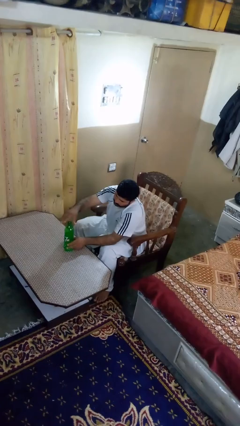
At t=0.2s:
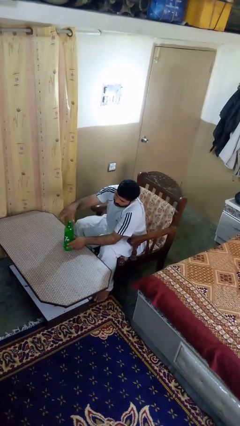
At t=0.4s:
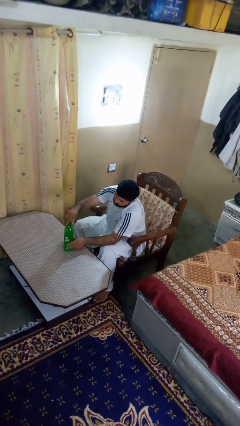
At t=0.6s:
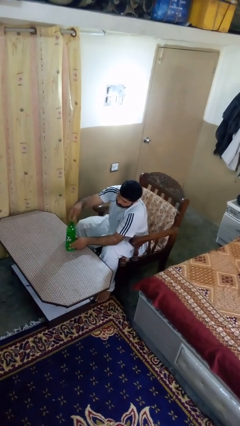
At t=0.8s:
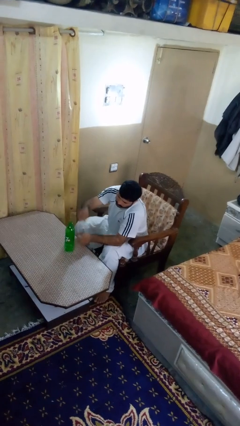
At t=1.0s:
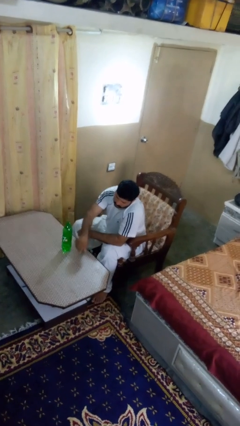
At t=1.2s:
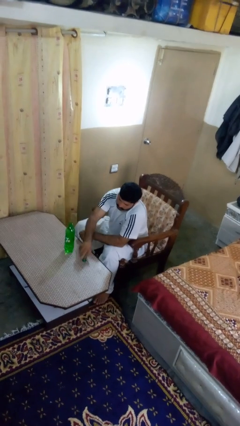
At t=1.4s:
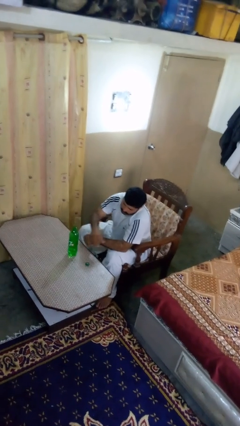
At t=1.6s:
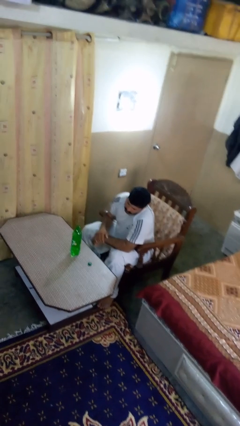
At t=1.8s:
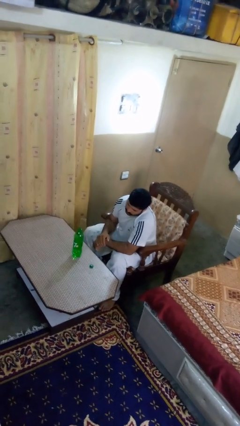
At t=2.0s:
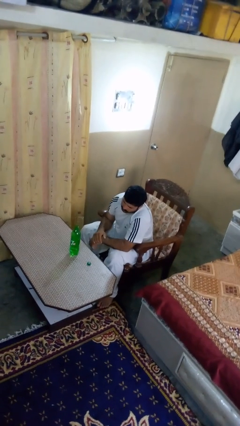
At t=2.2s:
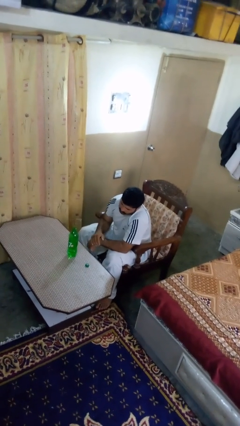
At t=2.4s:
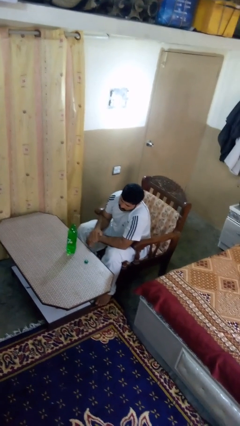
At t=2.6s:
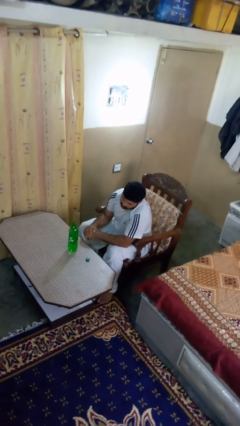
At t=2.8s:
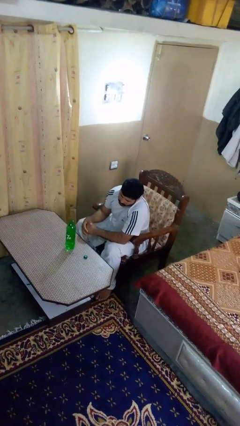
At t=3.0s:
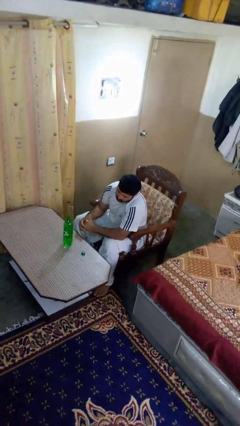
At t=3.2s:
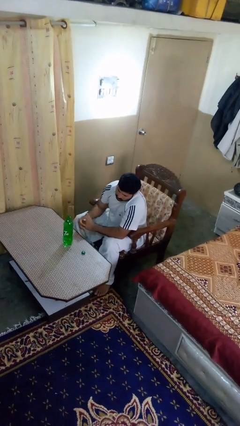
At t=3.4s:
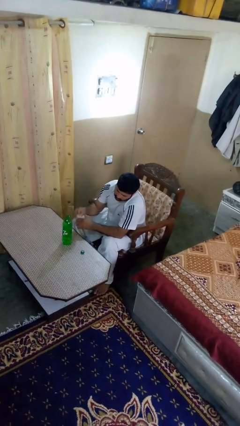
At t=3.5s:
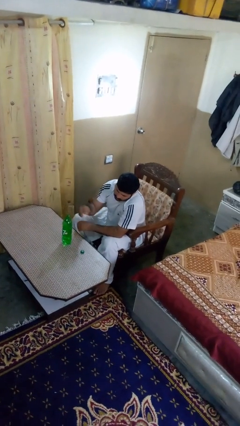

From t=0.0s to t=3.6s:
person unscrews lid from bottle

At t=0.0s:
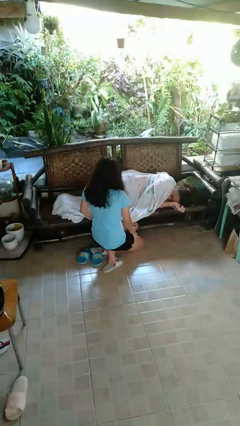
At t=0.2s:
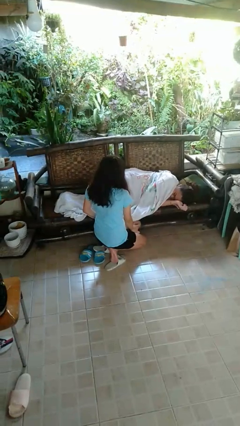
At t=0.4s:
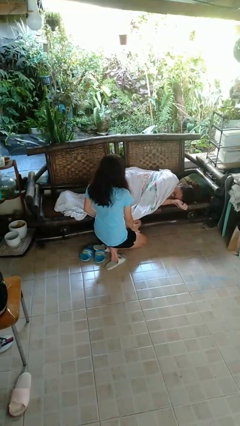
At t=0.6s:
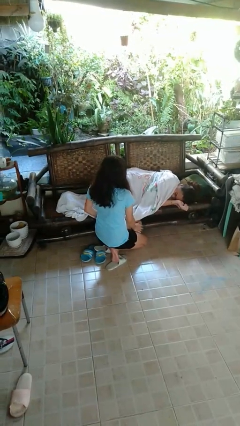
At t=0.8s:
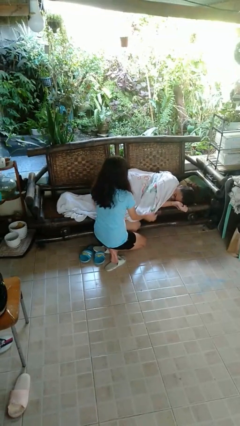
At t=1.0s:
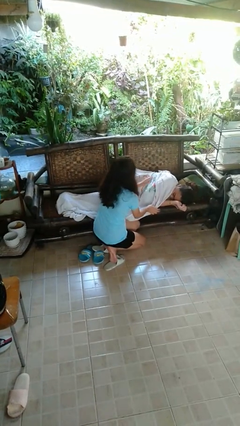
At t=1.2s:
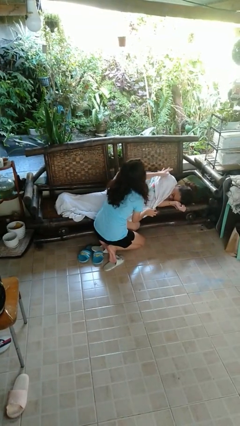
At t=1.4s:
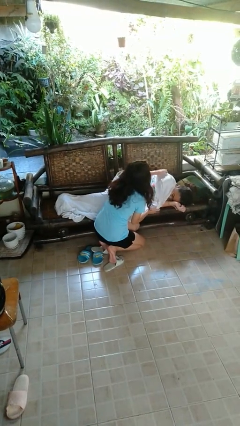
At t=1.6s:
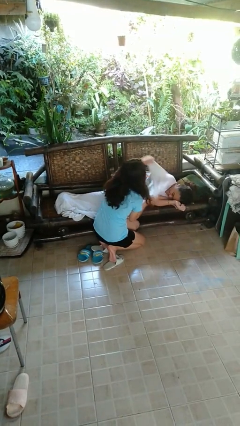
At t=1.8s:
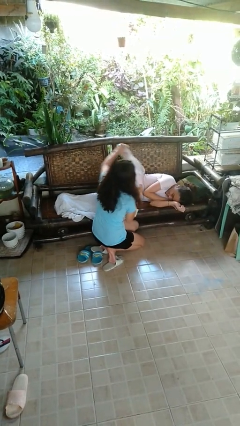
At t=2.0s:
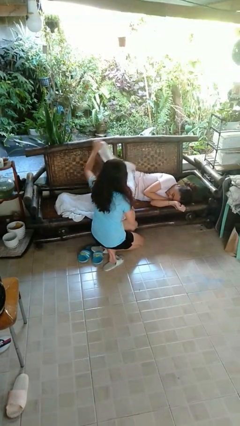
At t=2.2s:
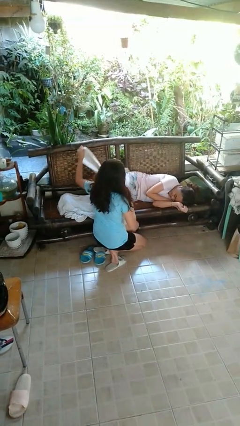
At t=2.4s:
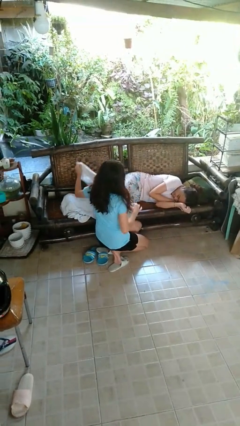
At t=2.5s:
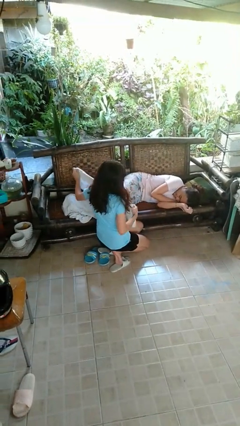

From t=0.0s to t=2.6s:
person uncovers friend with blanket

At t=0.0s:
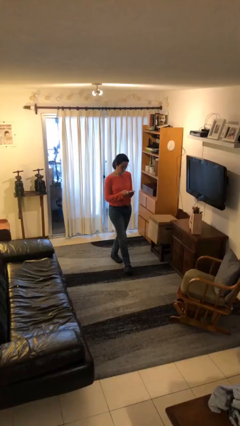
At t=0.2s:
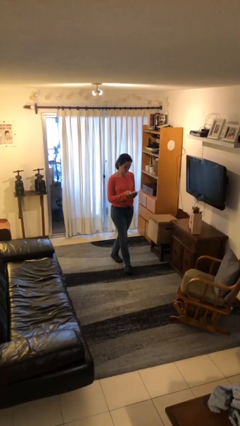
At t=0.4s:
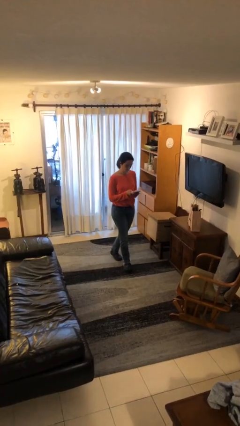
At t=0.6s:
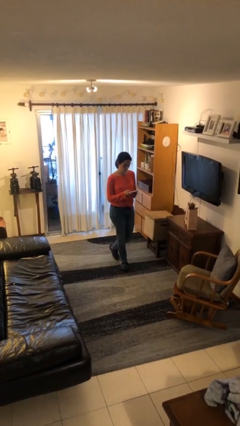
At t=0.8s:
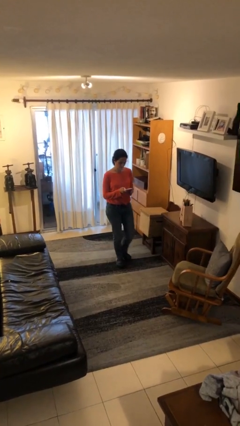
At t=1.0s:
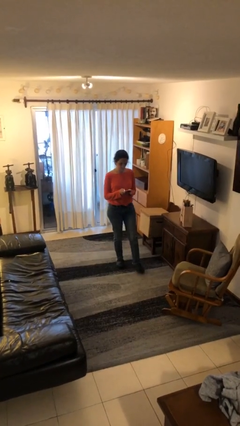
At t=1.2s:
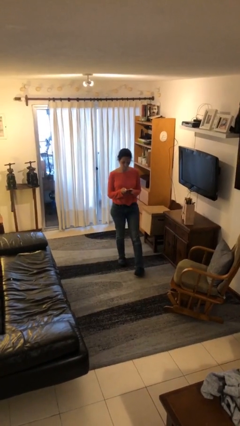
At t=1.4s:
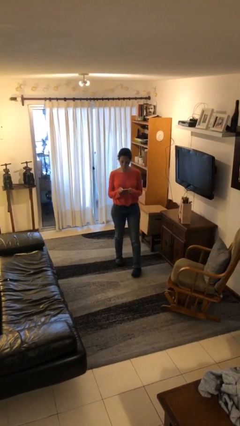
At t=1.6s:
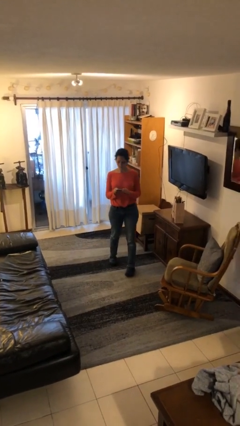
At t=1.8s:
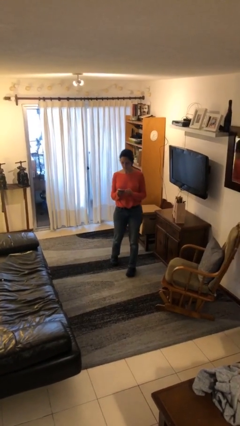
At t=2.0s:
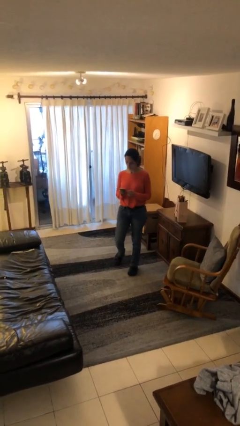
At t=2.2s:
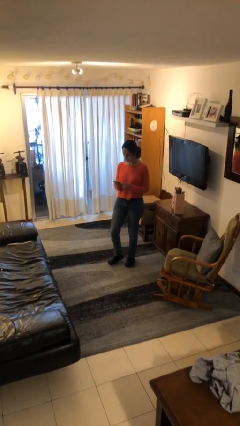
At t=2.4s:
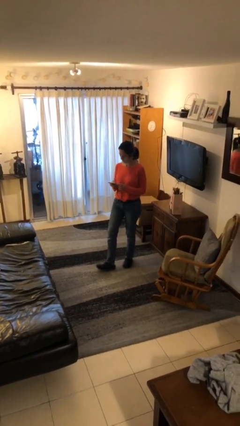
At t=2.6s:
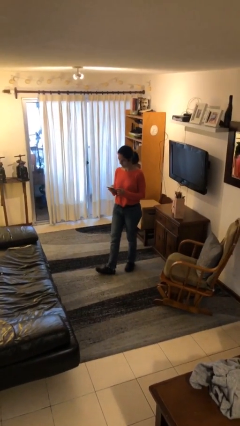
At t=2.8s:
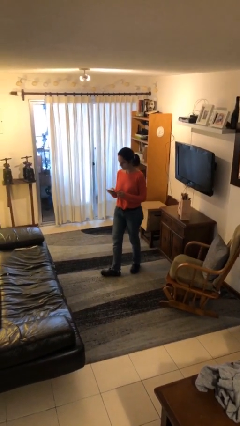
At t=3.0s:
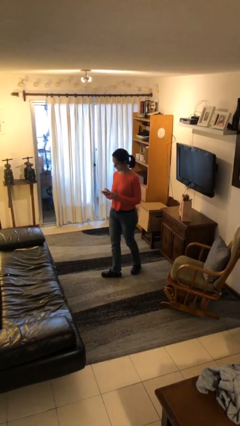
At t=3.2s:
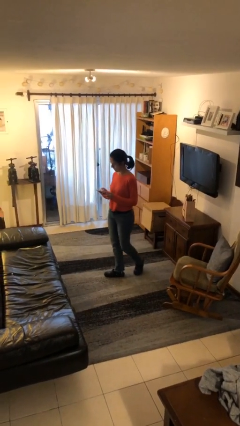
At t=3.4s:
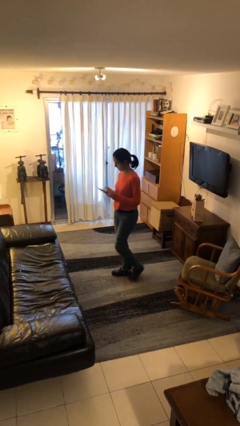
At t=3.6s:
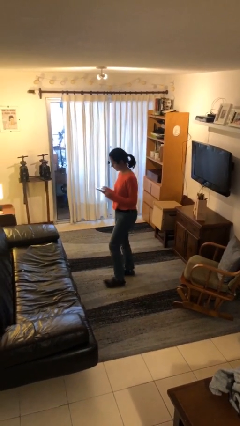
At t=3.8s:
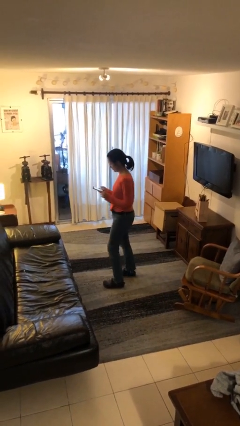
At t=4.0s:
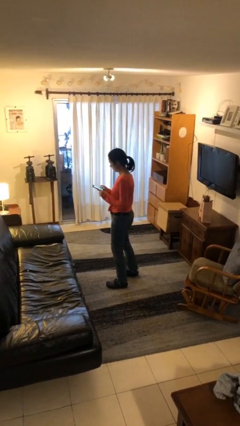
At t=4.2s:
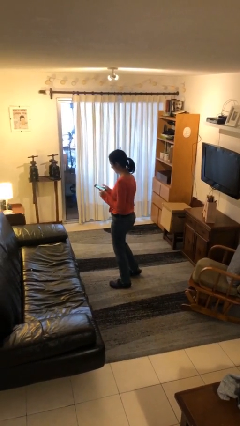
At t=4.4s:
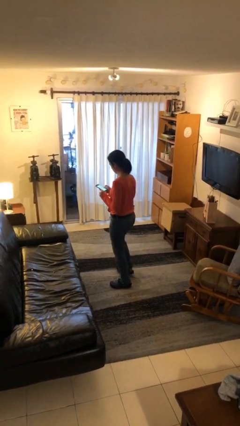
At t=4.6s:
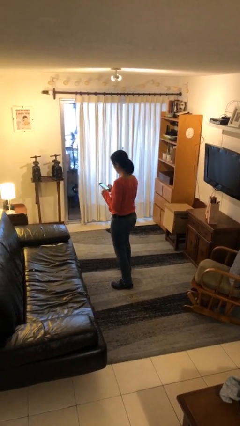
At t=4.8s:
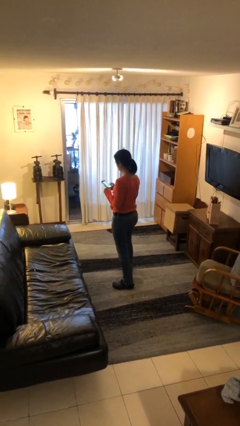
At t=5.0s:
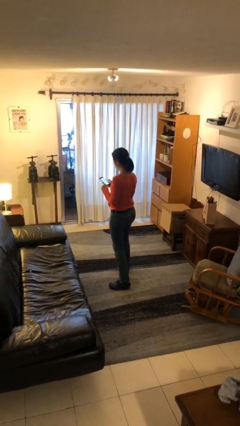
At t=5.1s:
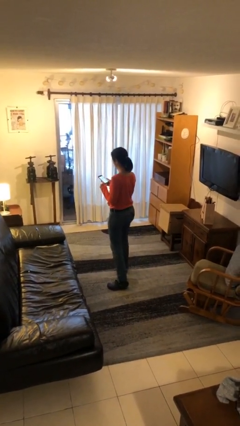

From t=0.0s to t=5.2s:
person texts on phone

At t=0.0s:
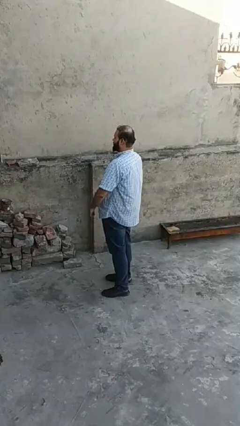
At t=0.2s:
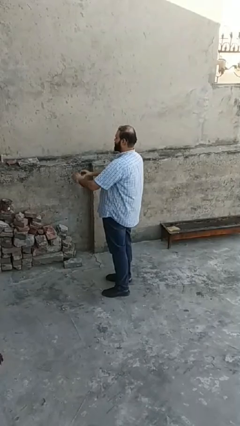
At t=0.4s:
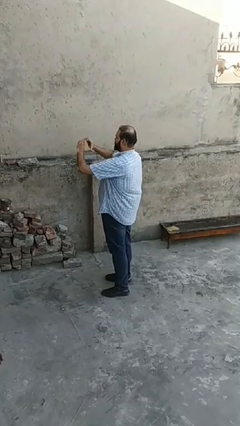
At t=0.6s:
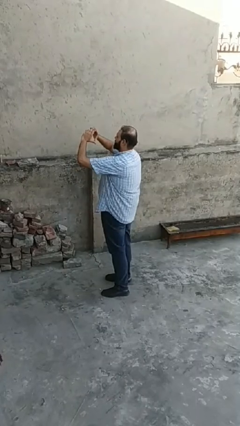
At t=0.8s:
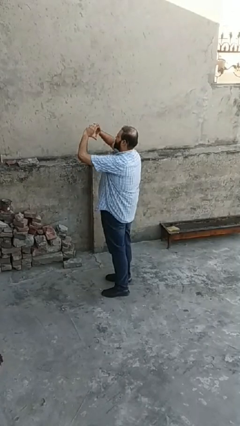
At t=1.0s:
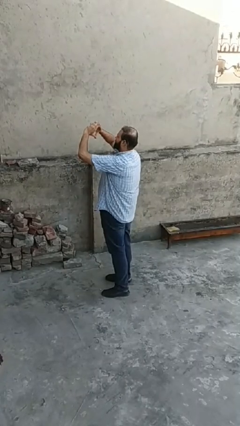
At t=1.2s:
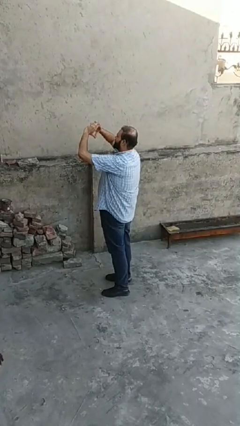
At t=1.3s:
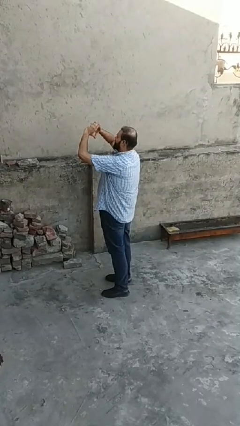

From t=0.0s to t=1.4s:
person gestures heart

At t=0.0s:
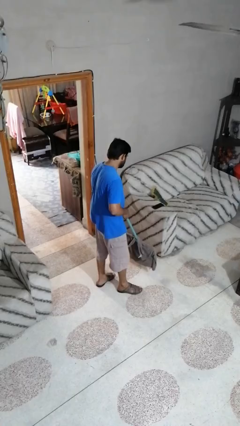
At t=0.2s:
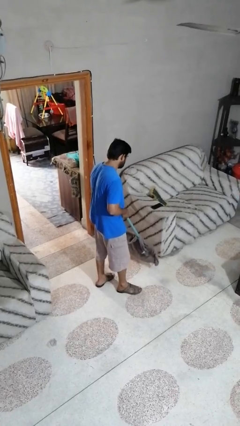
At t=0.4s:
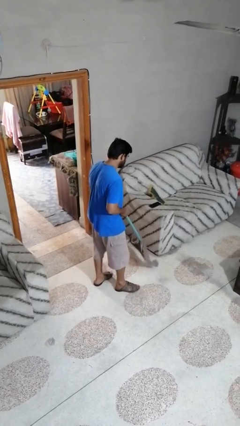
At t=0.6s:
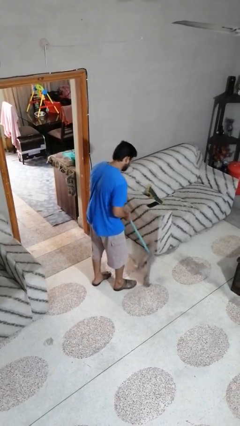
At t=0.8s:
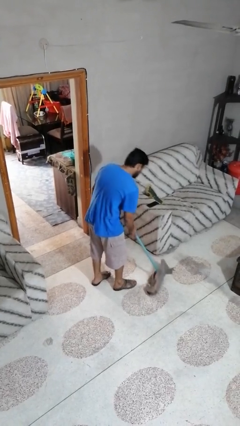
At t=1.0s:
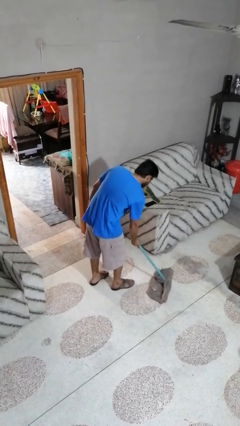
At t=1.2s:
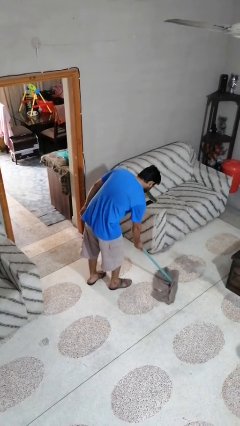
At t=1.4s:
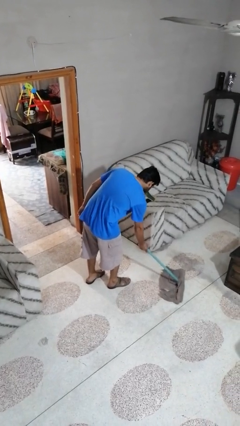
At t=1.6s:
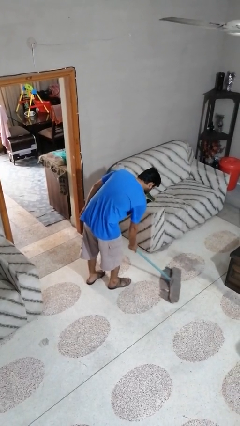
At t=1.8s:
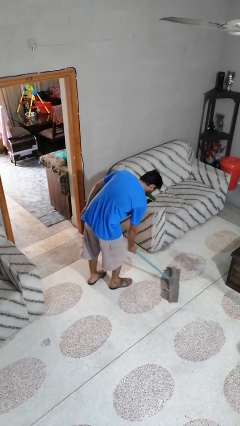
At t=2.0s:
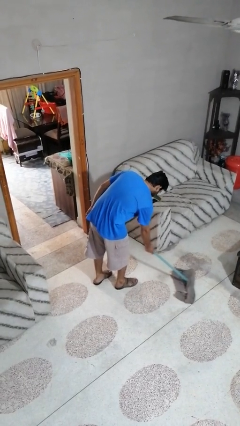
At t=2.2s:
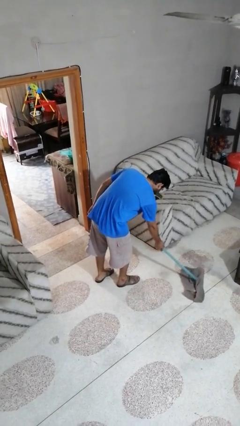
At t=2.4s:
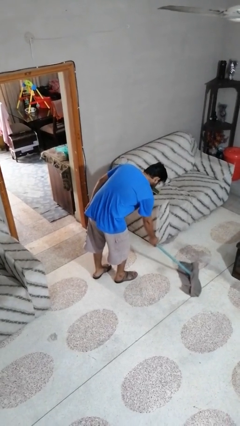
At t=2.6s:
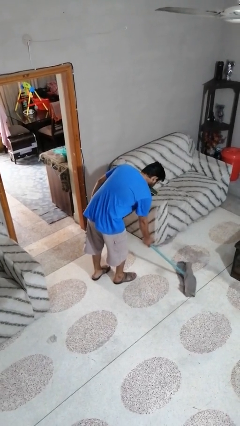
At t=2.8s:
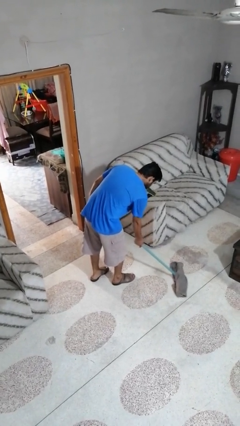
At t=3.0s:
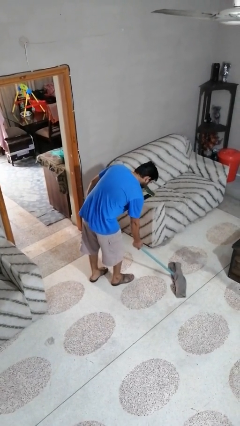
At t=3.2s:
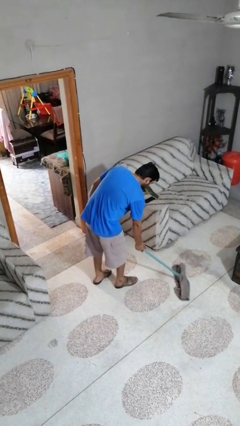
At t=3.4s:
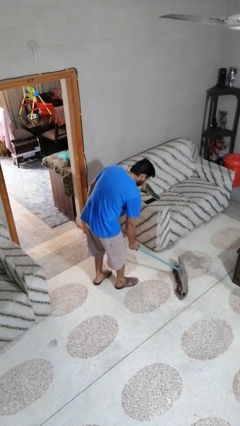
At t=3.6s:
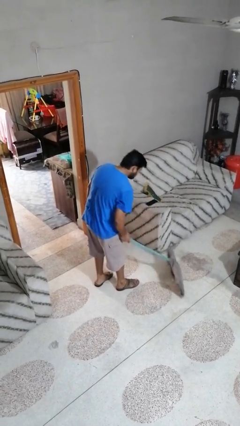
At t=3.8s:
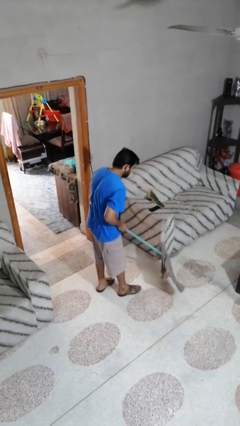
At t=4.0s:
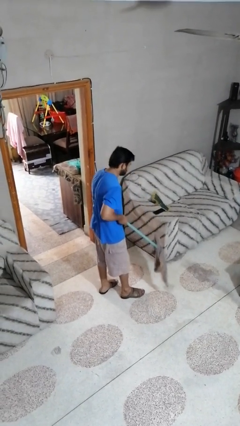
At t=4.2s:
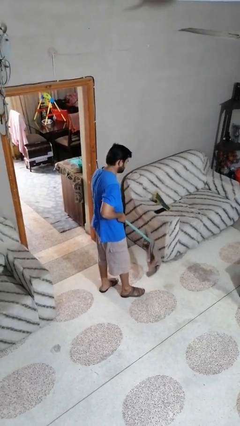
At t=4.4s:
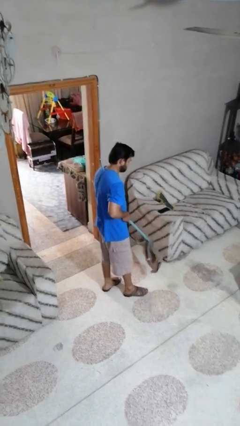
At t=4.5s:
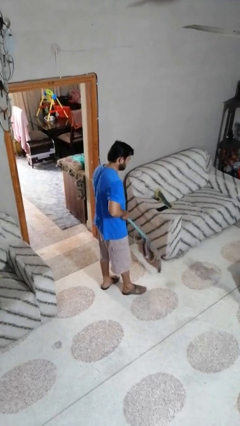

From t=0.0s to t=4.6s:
person mops

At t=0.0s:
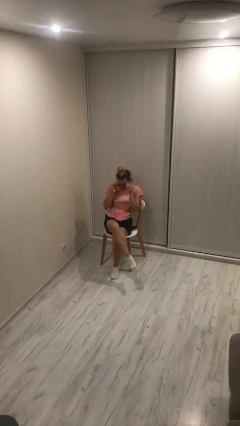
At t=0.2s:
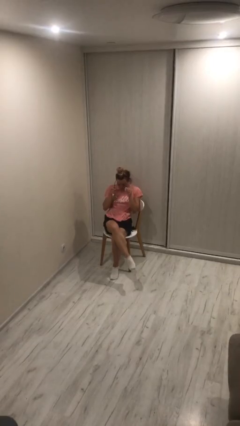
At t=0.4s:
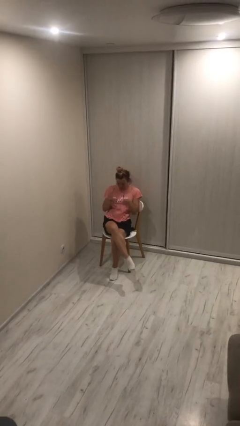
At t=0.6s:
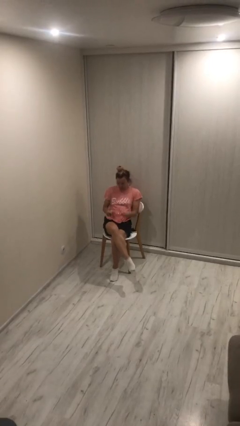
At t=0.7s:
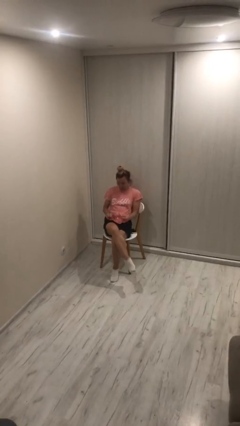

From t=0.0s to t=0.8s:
person takes off glasses
